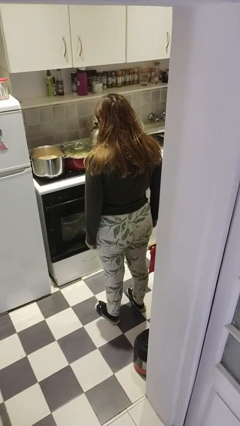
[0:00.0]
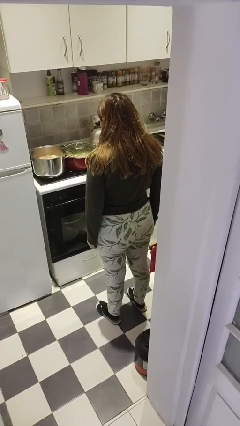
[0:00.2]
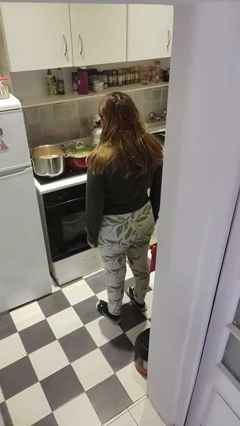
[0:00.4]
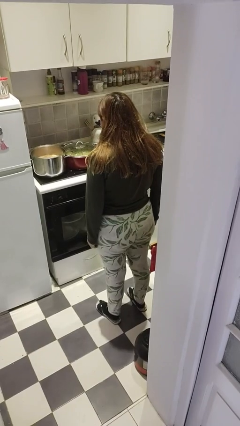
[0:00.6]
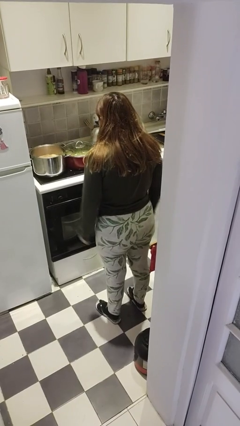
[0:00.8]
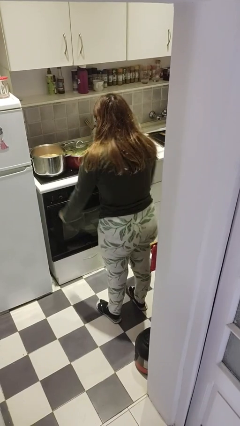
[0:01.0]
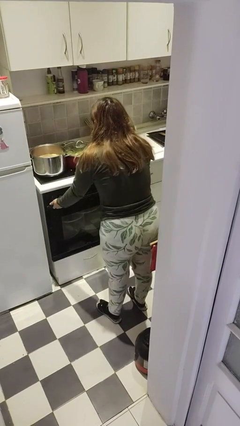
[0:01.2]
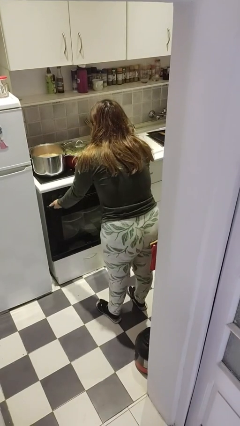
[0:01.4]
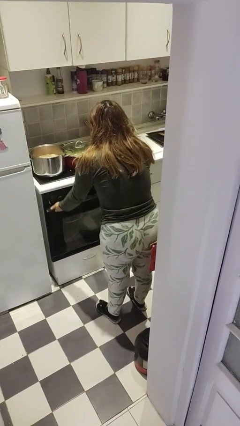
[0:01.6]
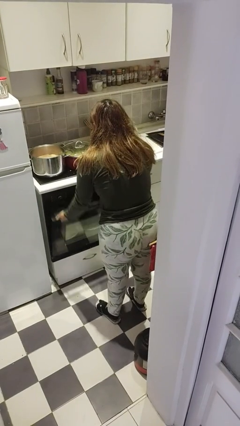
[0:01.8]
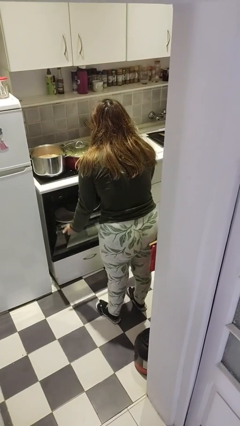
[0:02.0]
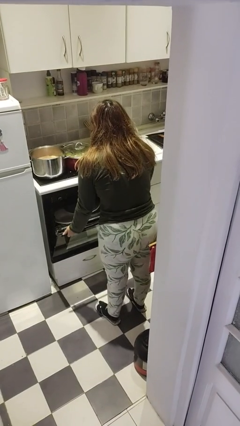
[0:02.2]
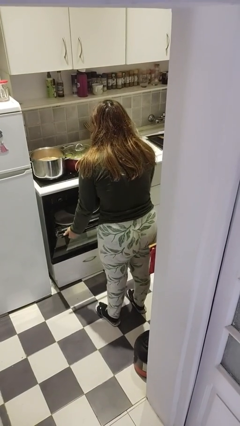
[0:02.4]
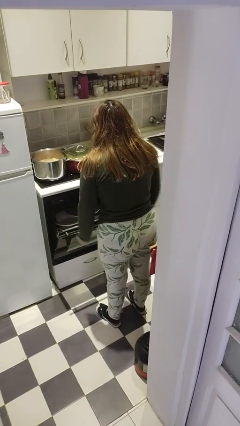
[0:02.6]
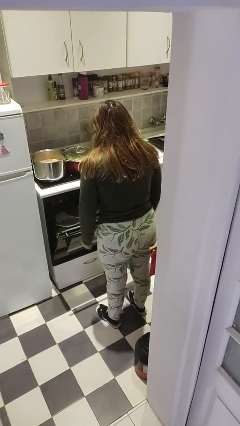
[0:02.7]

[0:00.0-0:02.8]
person opens dishwasher

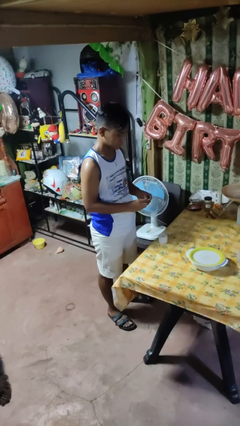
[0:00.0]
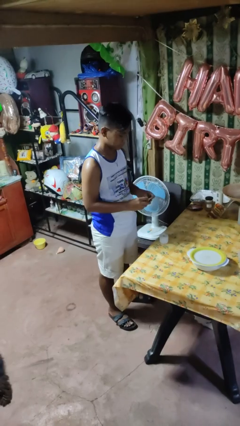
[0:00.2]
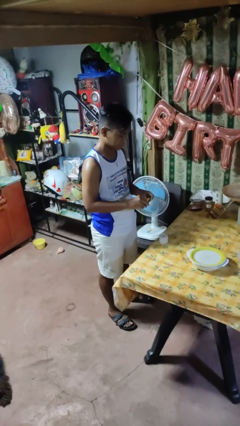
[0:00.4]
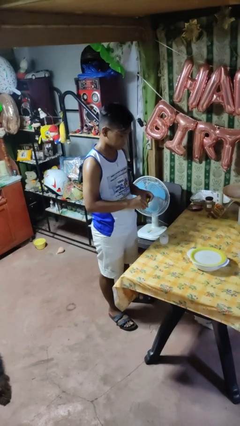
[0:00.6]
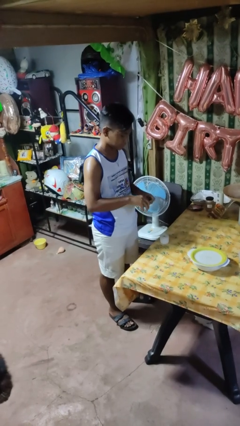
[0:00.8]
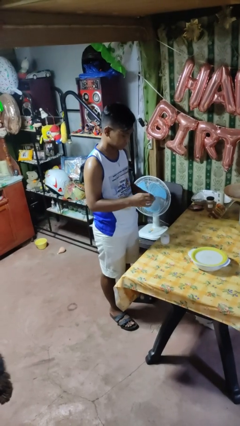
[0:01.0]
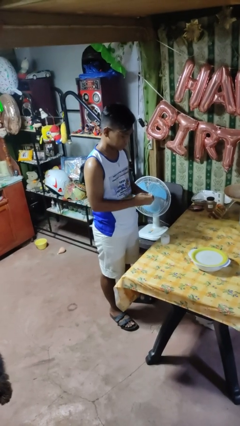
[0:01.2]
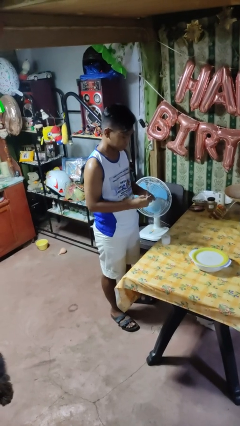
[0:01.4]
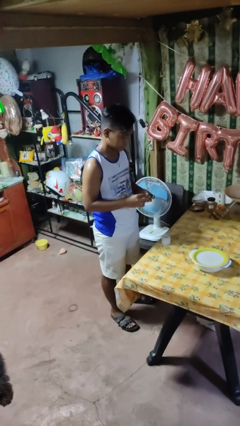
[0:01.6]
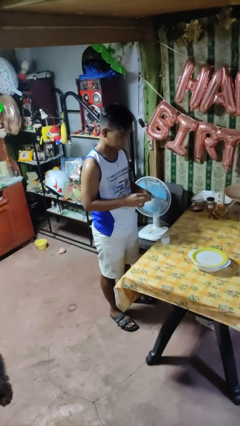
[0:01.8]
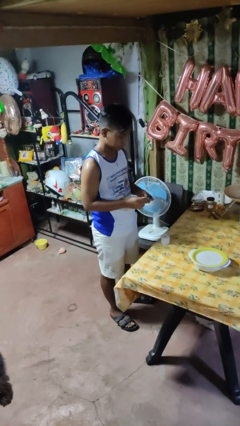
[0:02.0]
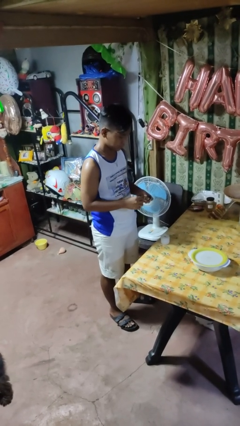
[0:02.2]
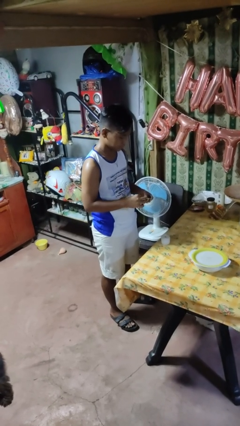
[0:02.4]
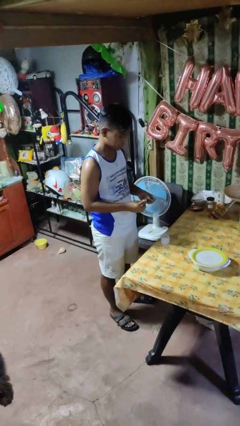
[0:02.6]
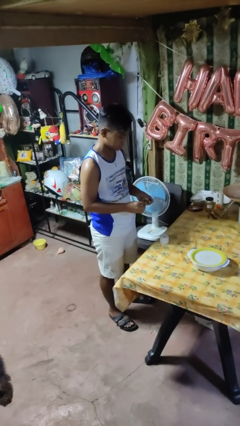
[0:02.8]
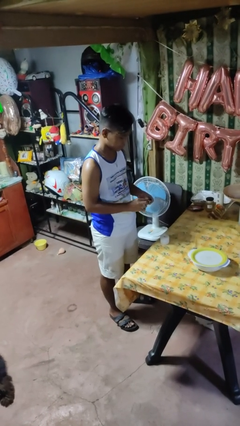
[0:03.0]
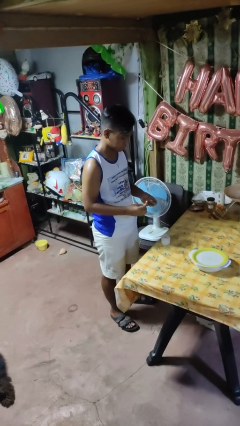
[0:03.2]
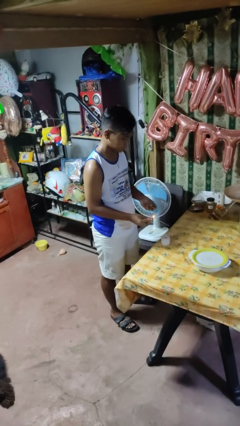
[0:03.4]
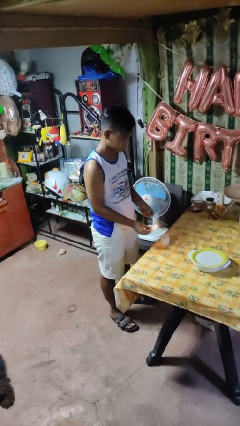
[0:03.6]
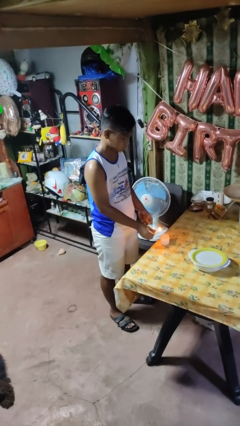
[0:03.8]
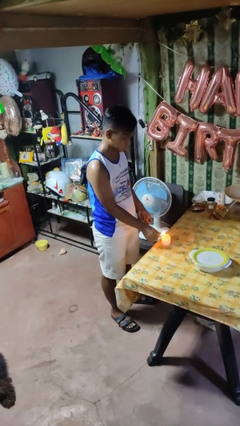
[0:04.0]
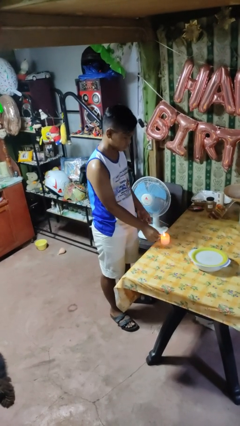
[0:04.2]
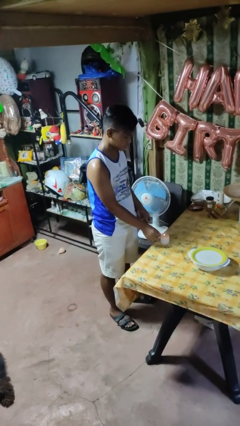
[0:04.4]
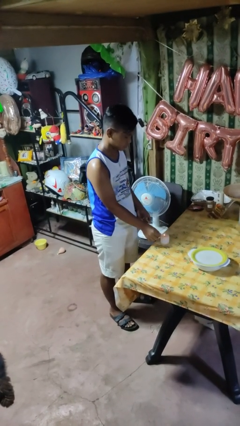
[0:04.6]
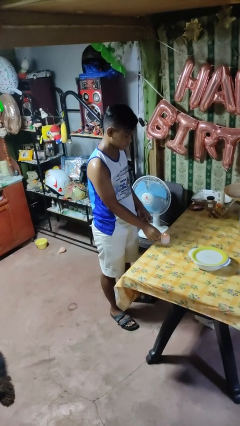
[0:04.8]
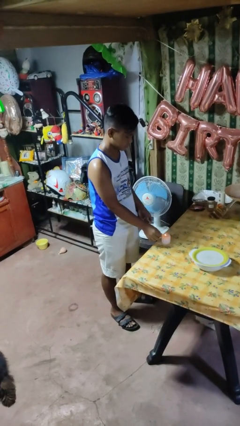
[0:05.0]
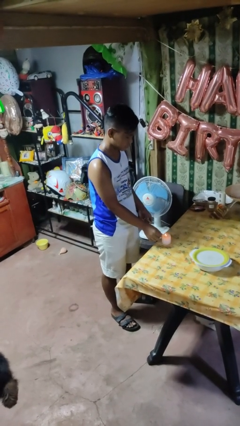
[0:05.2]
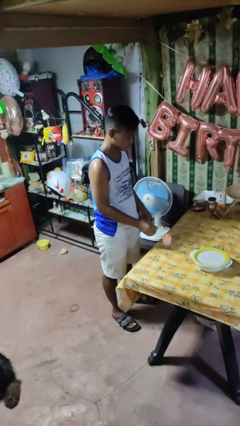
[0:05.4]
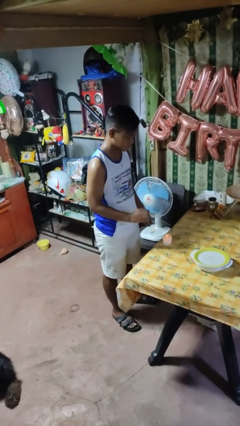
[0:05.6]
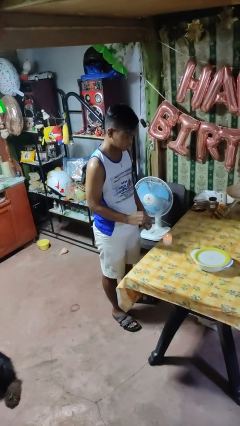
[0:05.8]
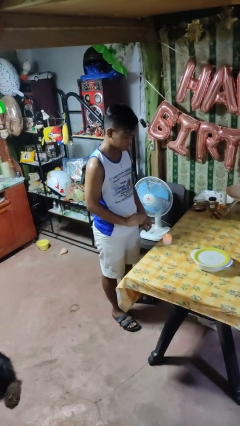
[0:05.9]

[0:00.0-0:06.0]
person lights candle

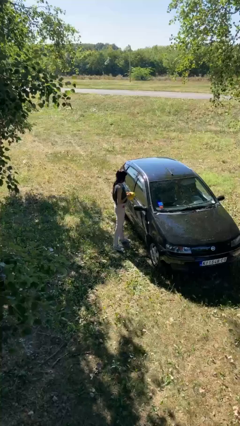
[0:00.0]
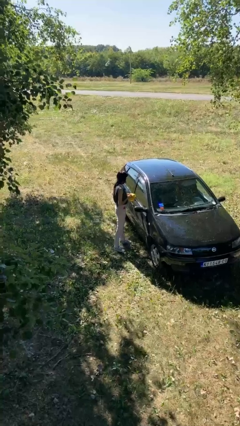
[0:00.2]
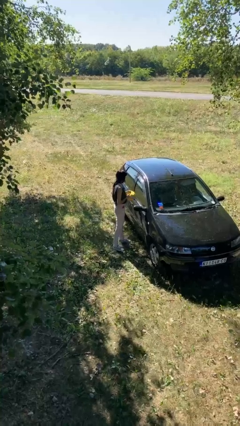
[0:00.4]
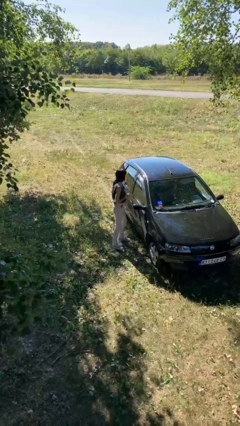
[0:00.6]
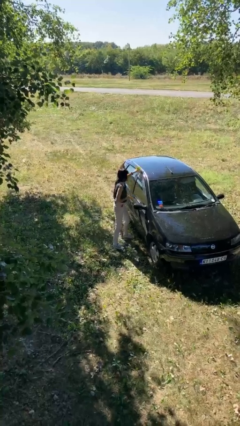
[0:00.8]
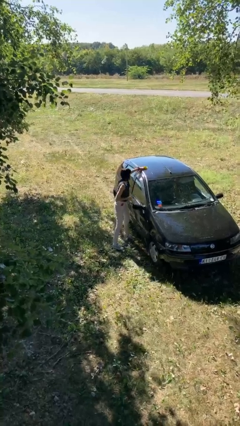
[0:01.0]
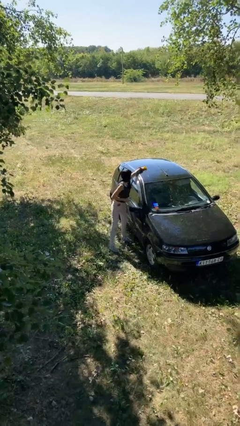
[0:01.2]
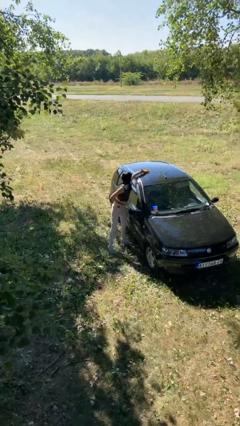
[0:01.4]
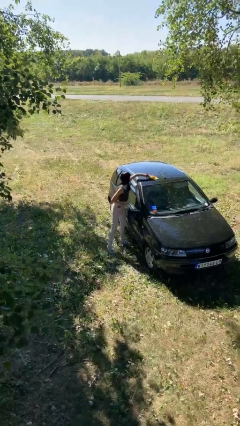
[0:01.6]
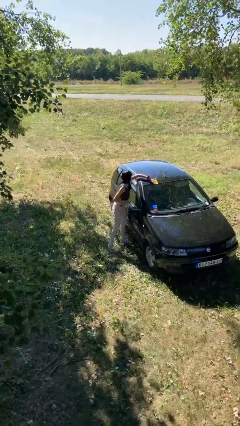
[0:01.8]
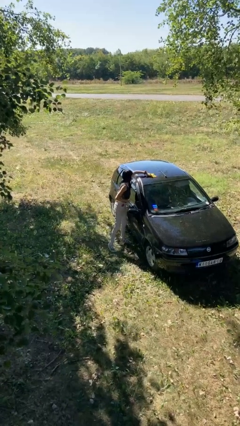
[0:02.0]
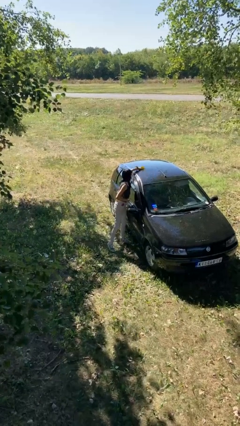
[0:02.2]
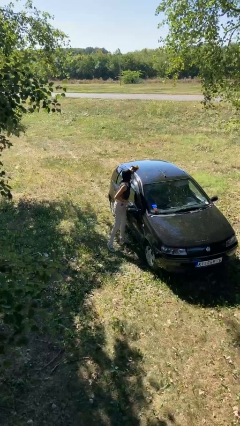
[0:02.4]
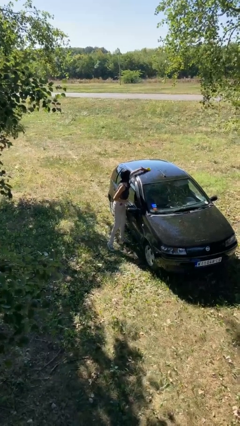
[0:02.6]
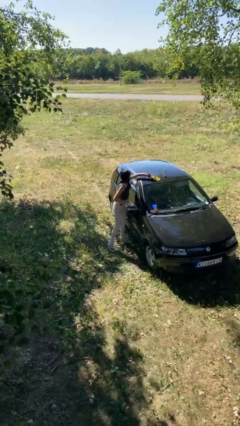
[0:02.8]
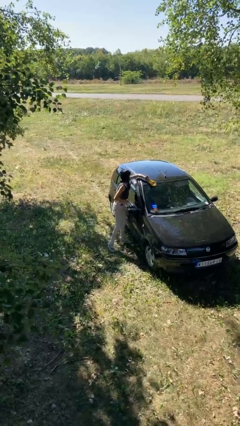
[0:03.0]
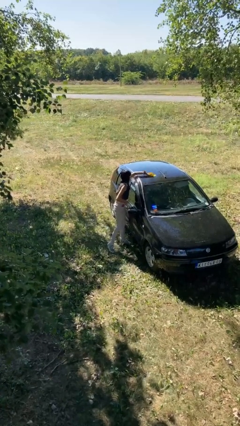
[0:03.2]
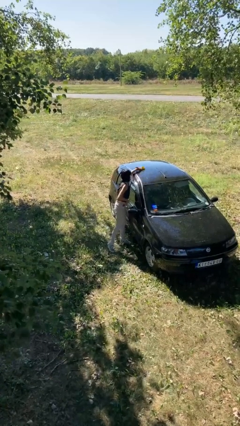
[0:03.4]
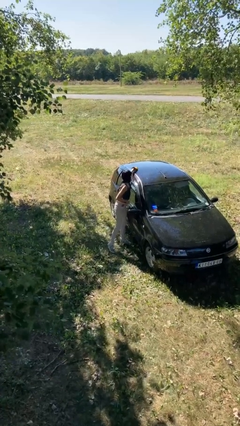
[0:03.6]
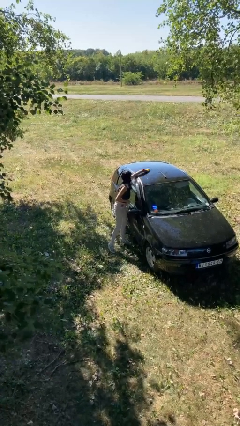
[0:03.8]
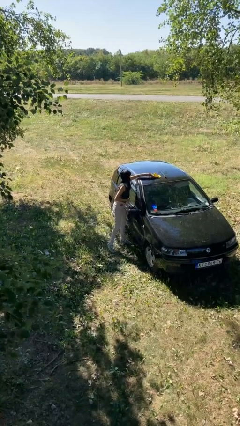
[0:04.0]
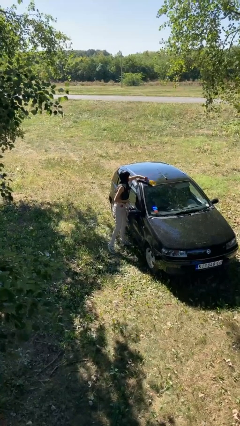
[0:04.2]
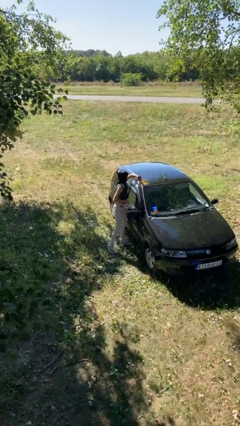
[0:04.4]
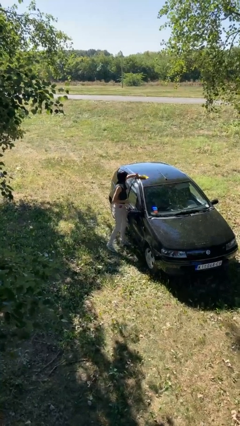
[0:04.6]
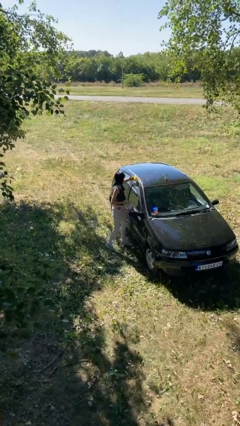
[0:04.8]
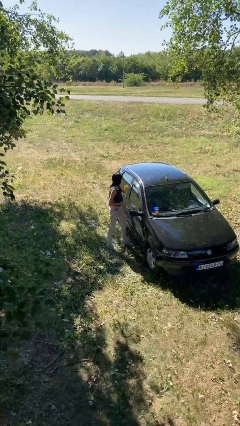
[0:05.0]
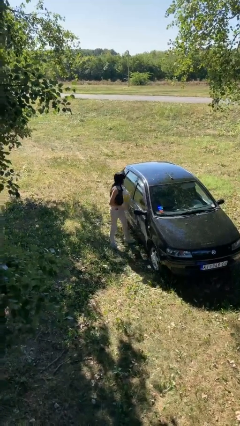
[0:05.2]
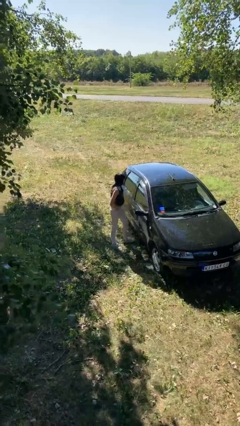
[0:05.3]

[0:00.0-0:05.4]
person polishes car with rag

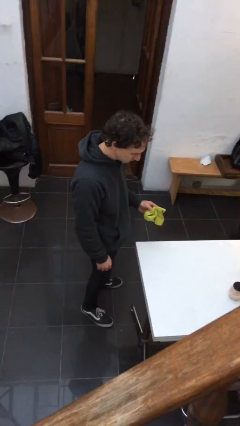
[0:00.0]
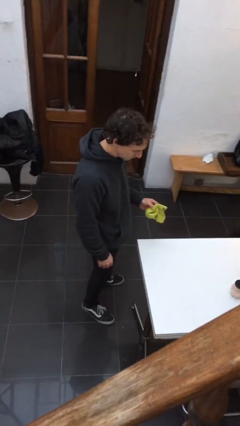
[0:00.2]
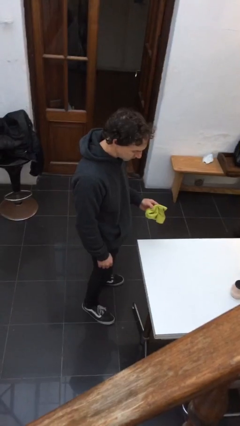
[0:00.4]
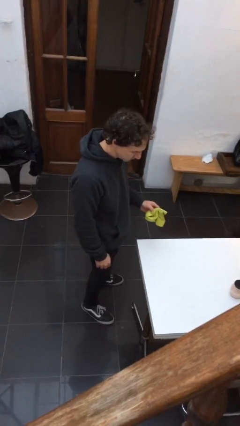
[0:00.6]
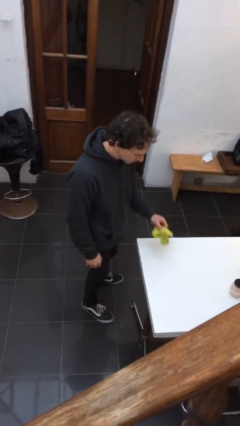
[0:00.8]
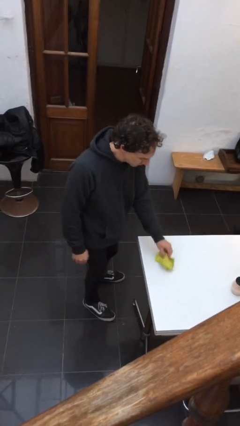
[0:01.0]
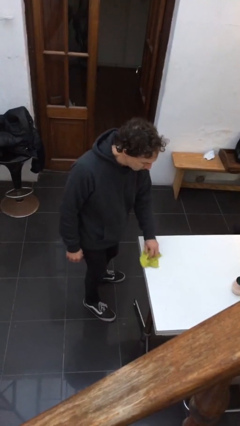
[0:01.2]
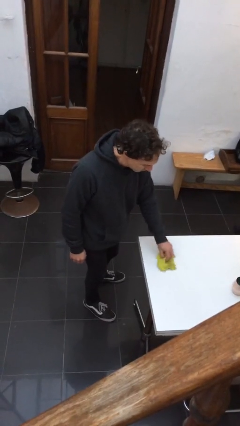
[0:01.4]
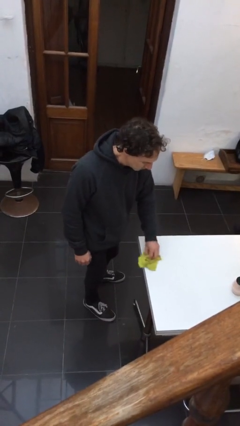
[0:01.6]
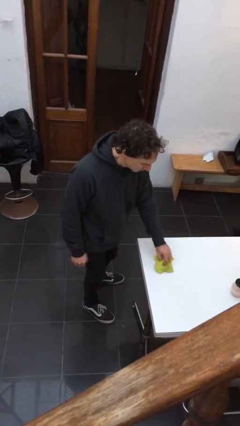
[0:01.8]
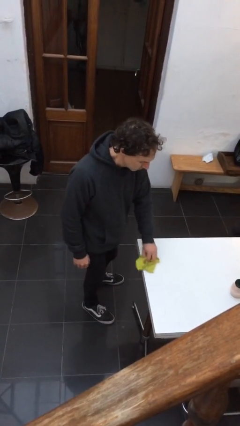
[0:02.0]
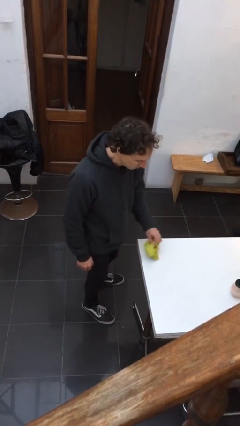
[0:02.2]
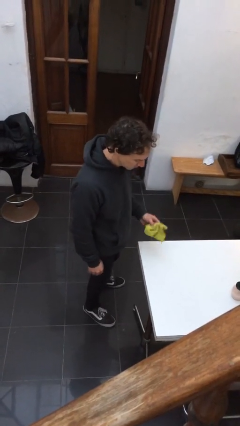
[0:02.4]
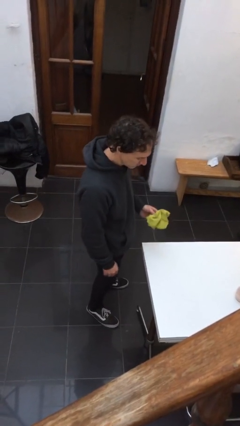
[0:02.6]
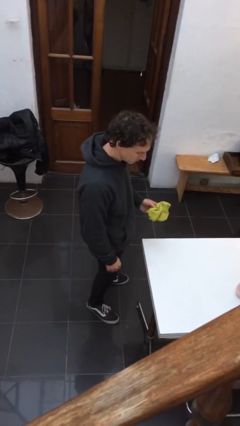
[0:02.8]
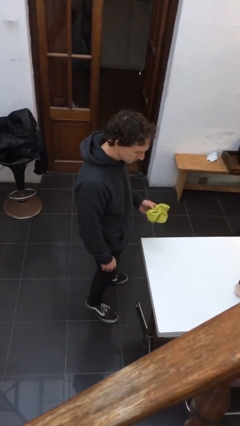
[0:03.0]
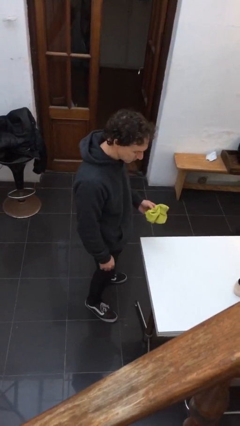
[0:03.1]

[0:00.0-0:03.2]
person cleans table with rag

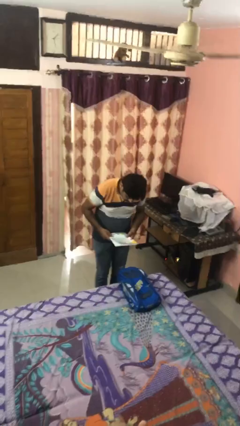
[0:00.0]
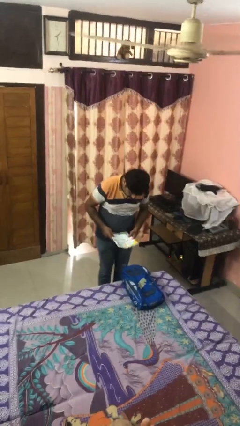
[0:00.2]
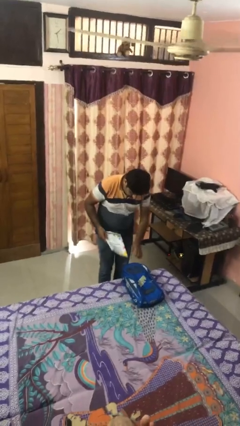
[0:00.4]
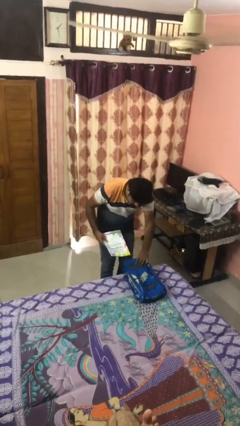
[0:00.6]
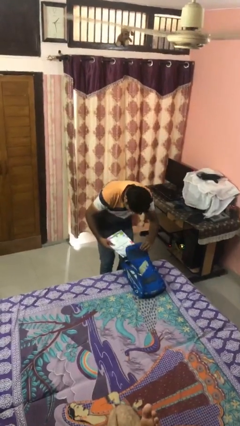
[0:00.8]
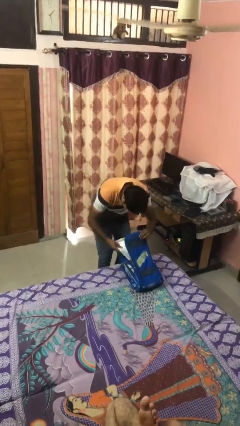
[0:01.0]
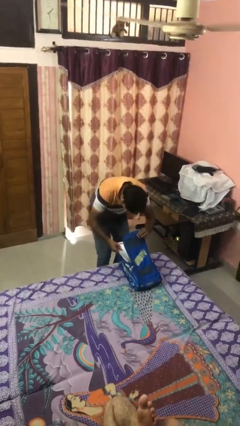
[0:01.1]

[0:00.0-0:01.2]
person puts object into backpack
